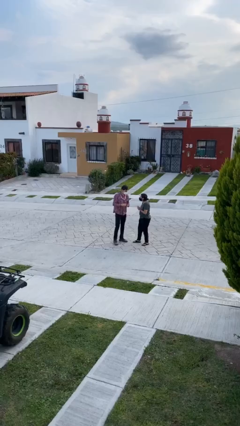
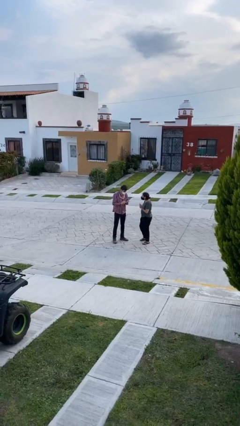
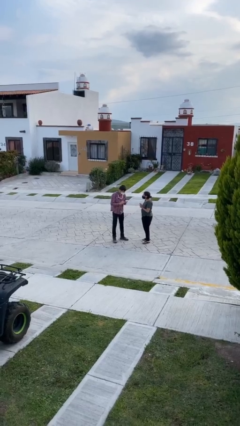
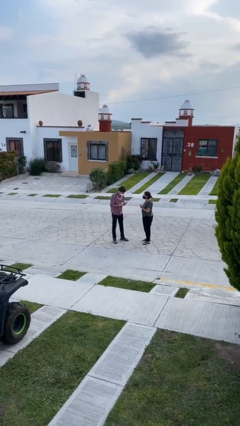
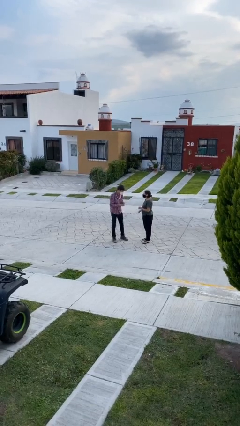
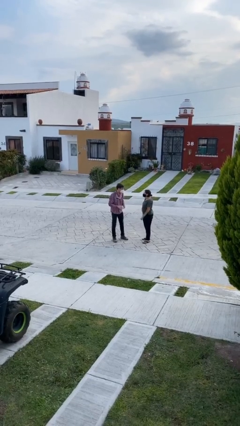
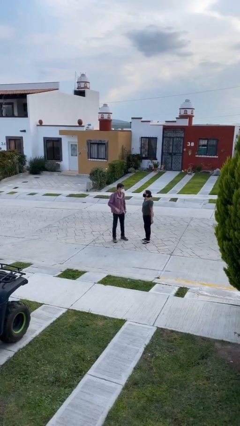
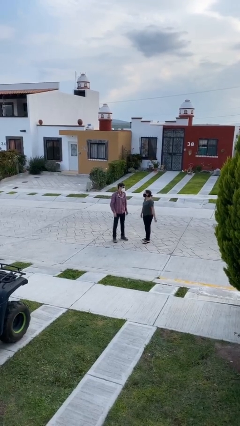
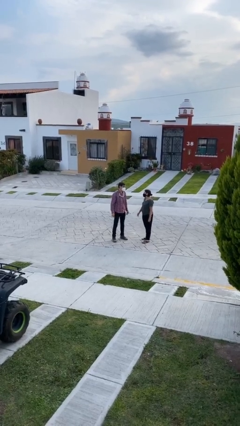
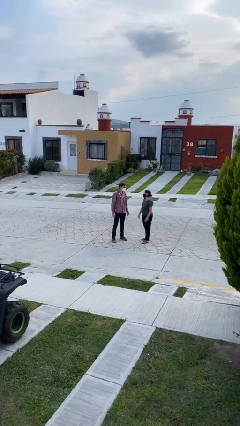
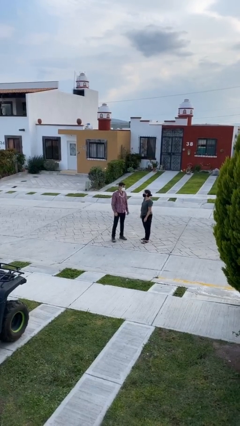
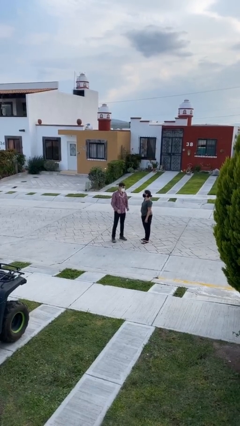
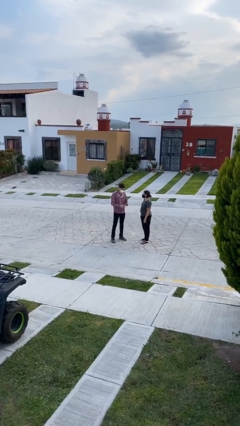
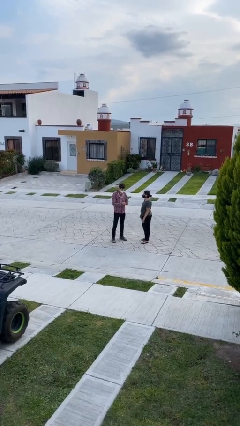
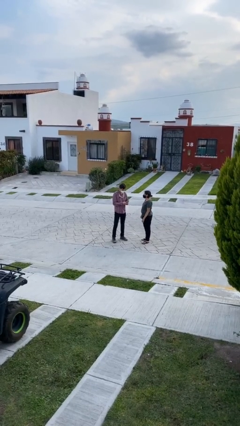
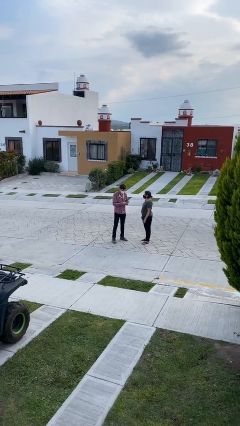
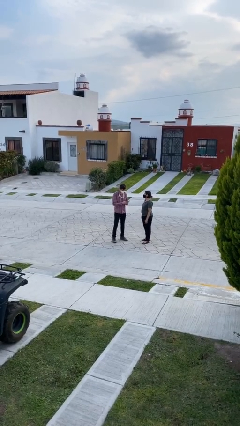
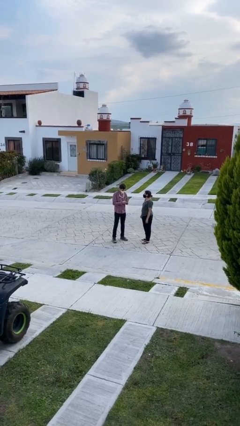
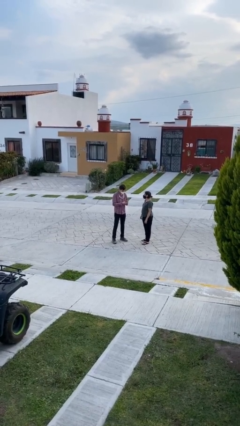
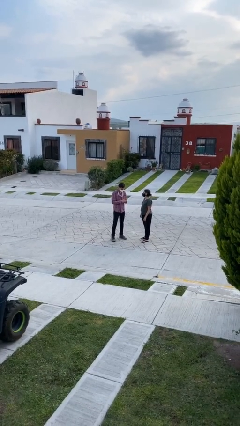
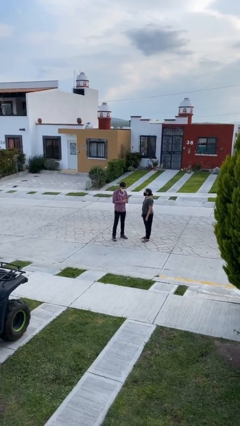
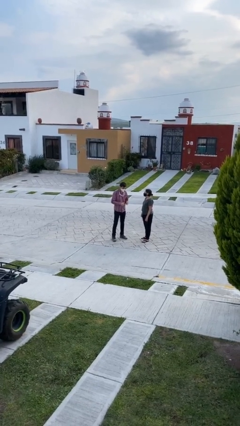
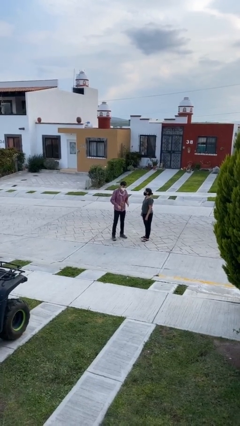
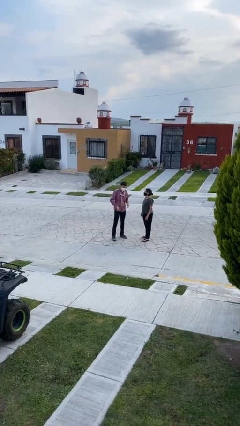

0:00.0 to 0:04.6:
person talks to person

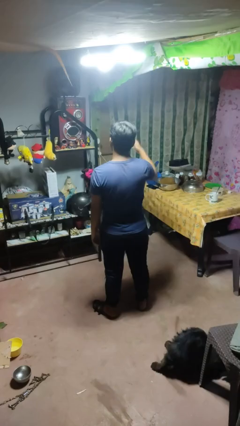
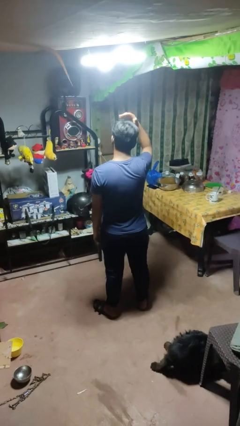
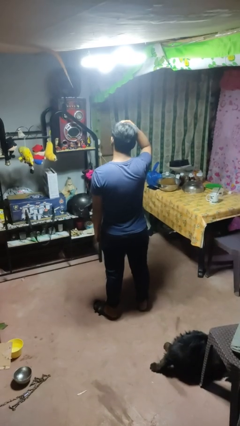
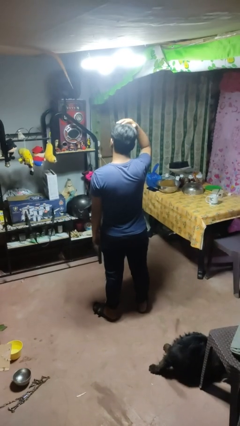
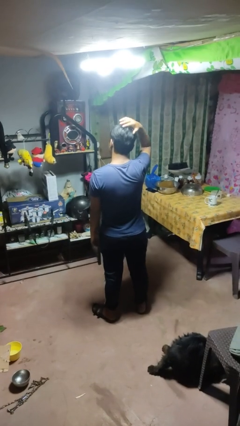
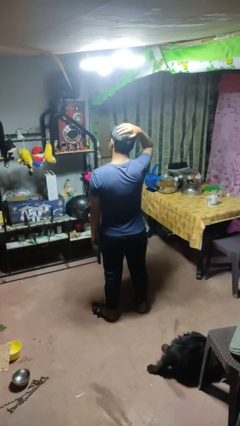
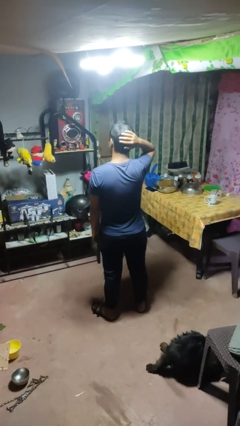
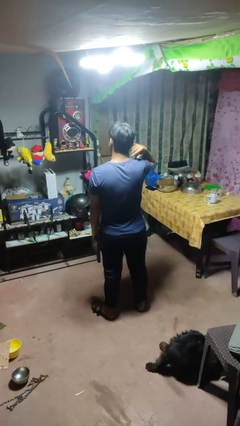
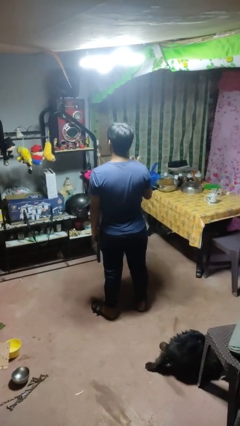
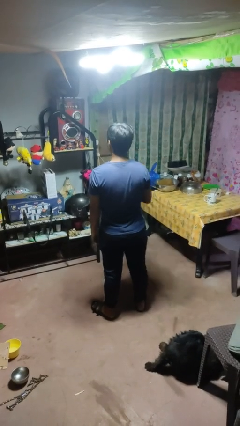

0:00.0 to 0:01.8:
person pats head

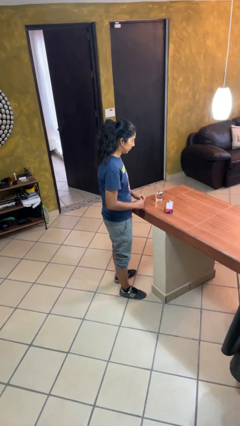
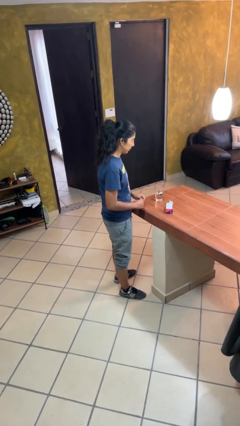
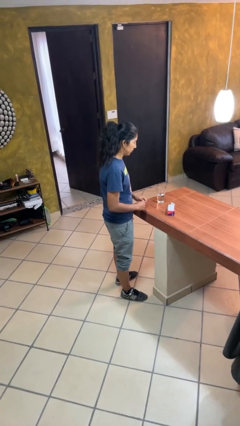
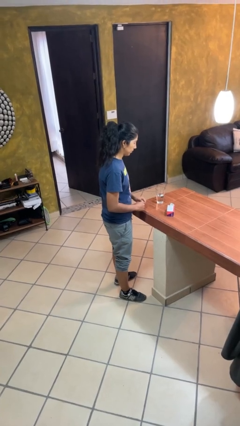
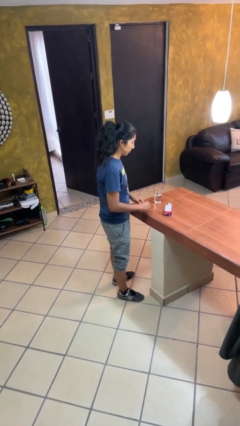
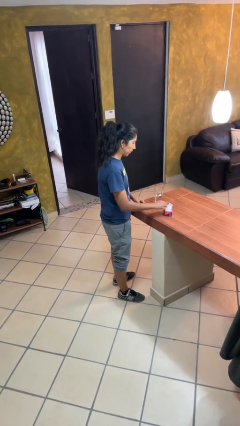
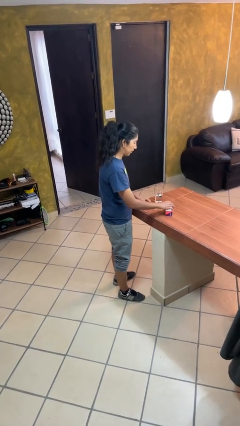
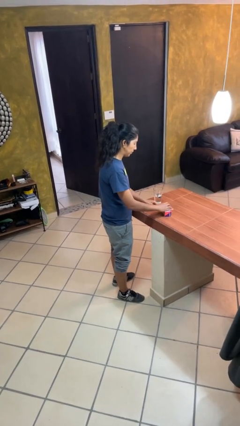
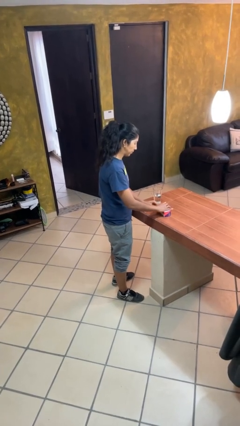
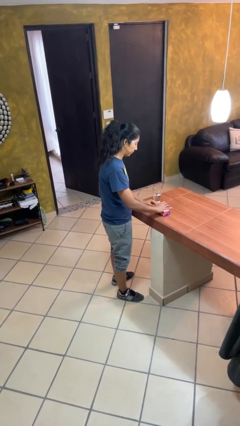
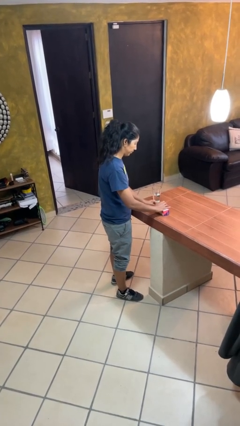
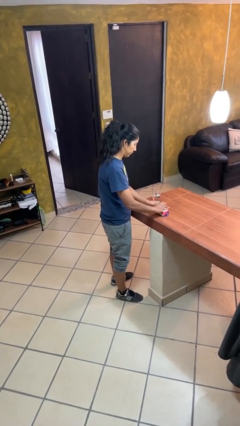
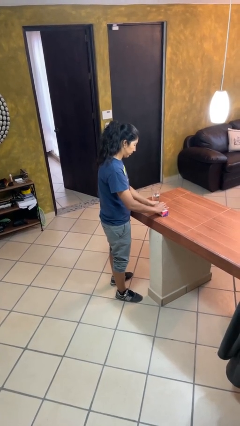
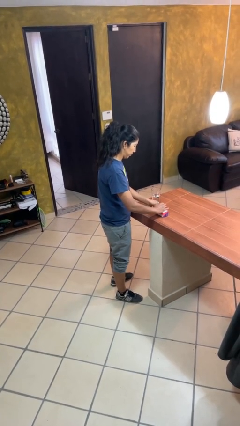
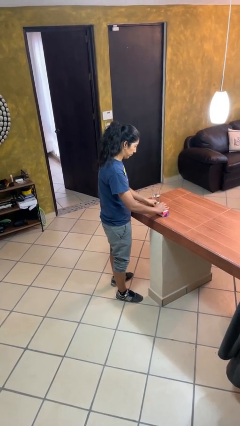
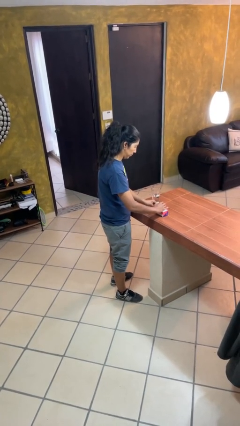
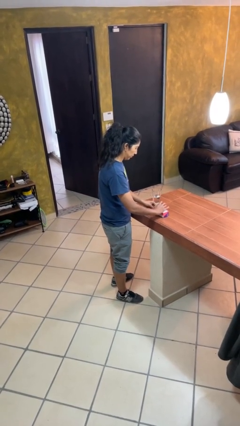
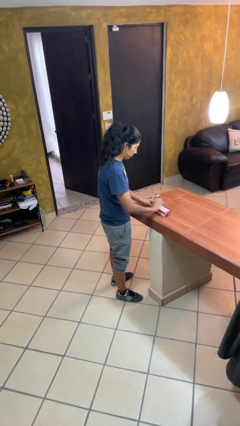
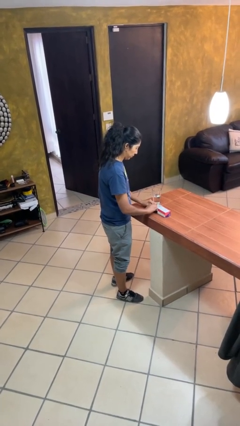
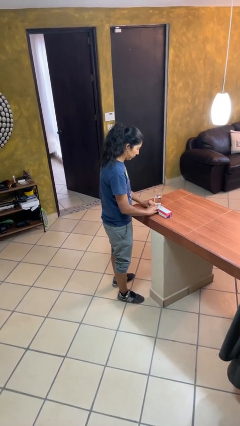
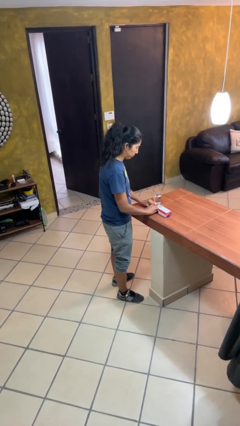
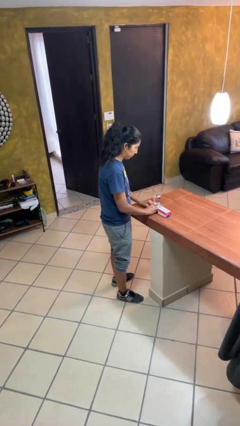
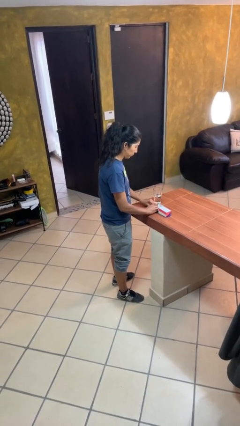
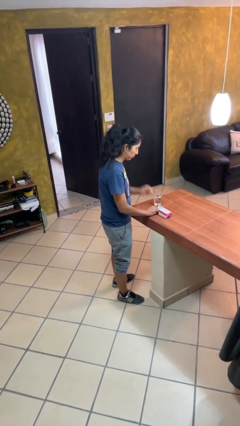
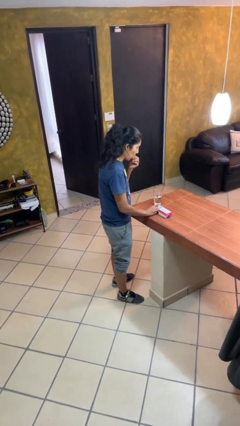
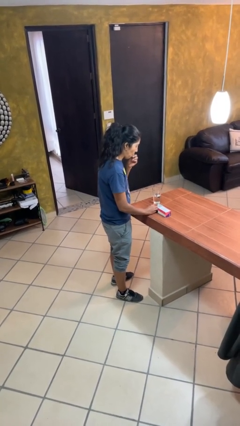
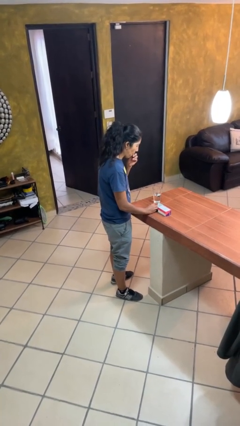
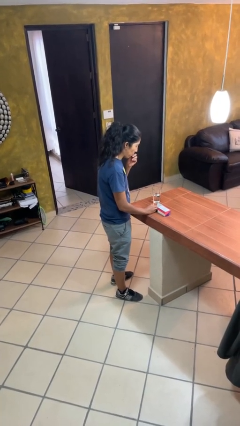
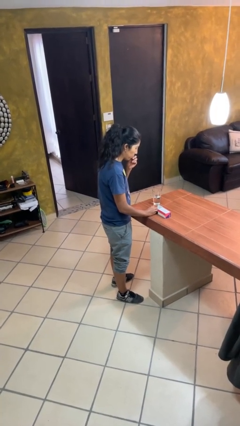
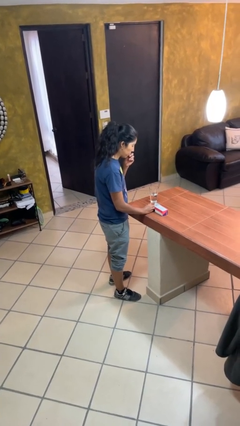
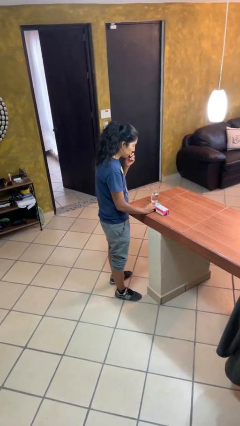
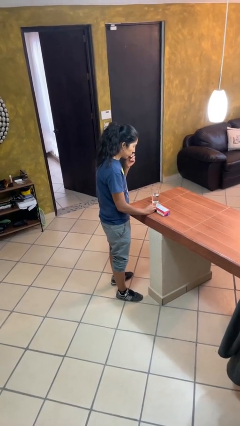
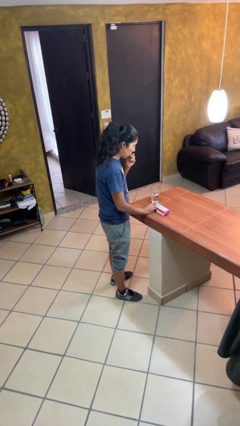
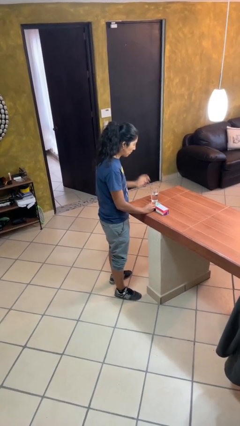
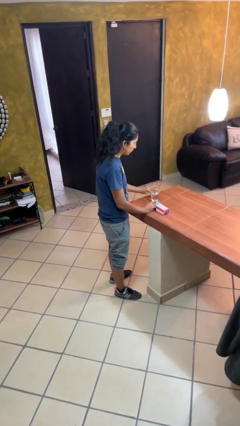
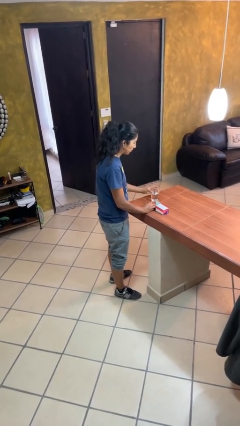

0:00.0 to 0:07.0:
person takes medicine pills

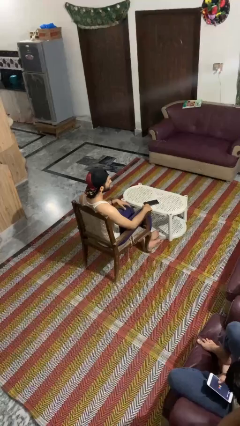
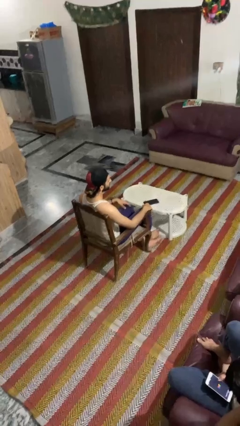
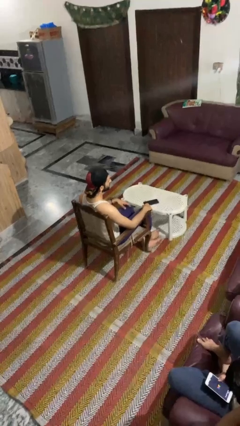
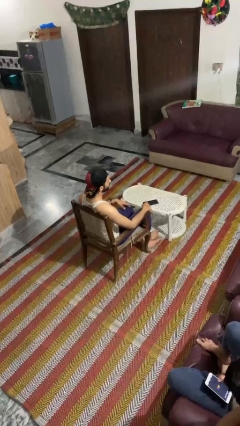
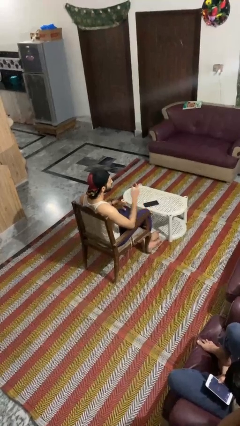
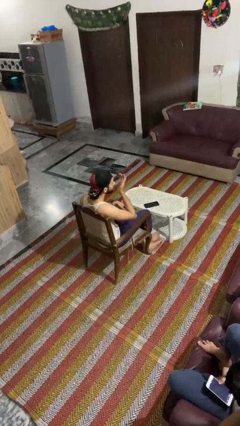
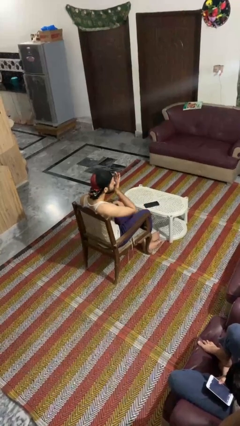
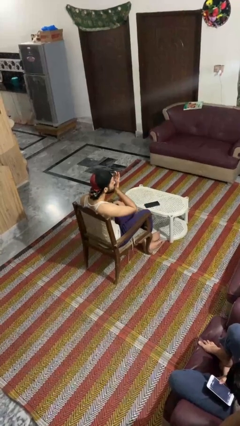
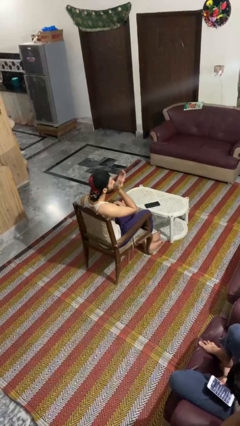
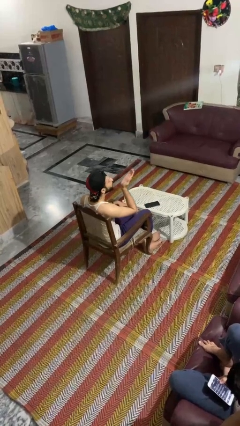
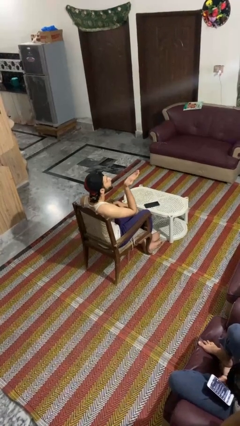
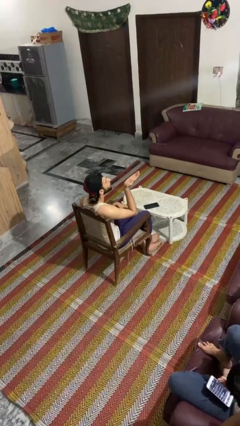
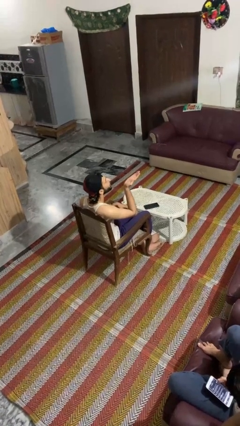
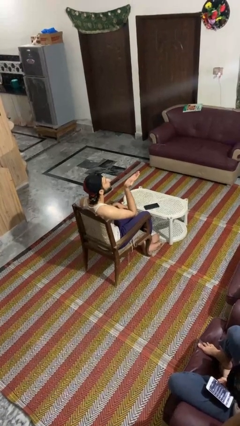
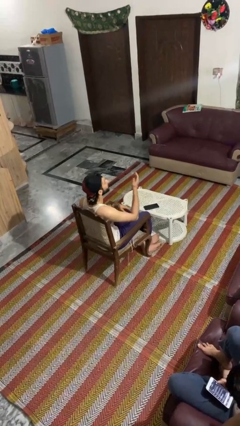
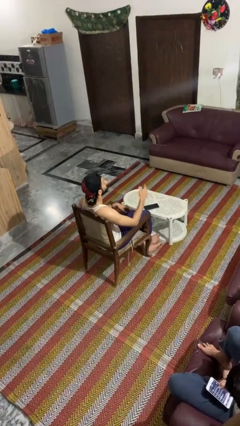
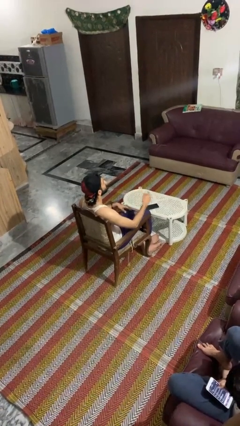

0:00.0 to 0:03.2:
person gestures blow kiss

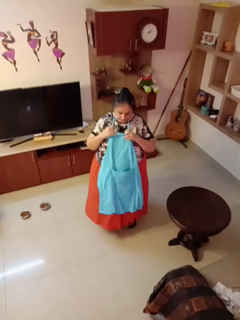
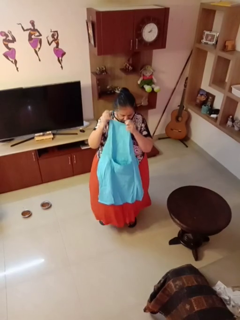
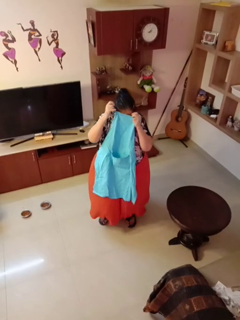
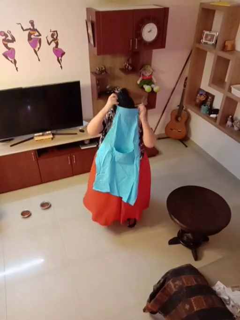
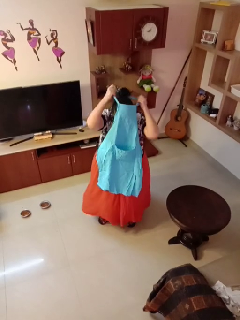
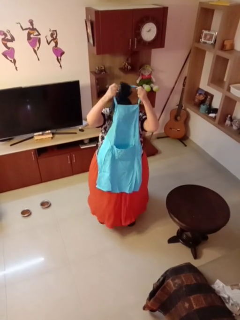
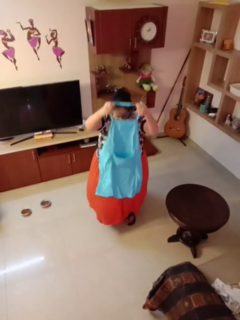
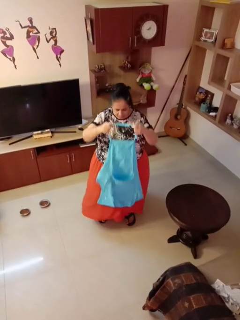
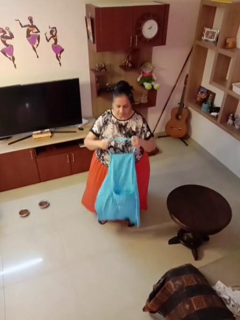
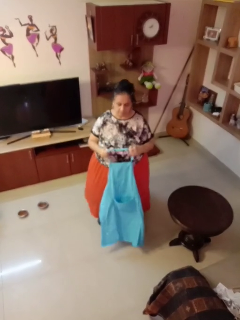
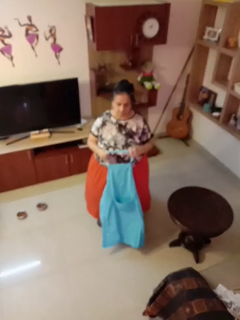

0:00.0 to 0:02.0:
person takes off apron
